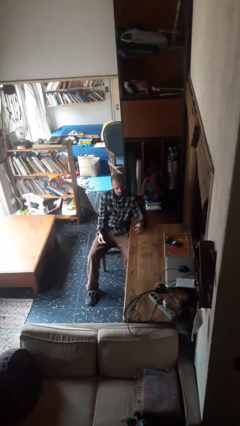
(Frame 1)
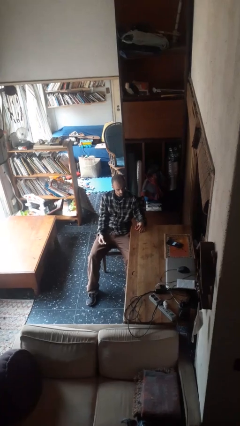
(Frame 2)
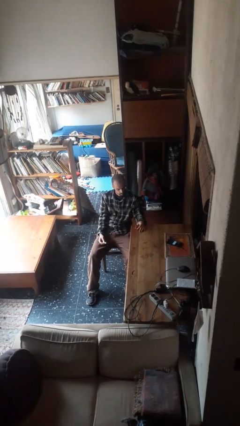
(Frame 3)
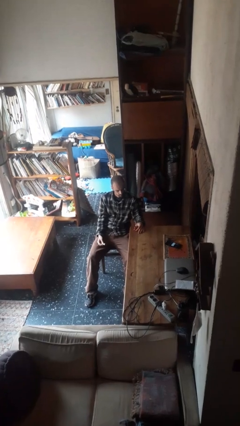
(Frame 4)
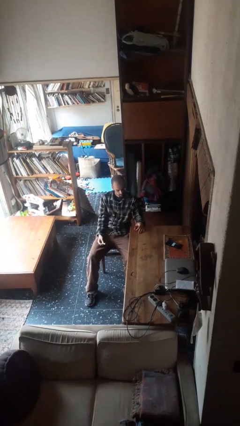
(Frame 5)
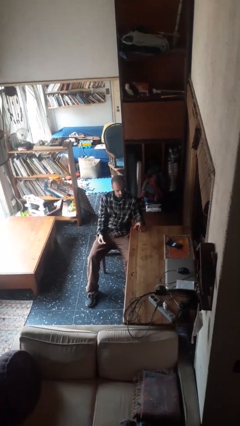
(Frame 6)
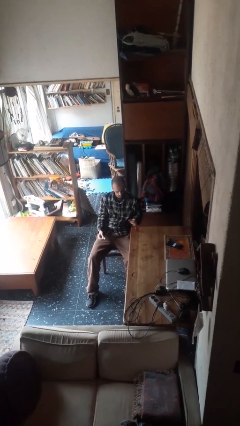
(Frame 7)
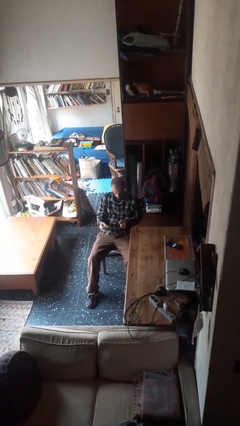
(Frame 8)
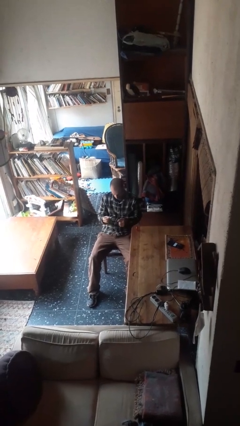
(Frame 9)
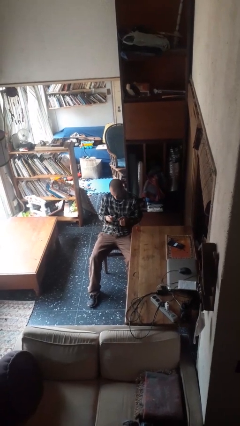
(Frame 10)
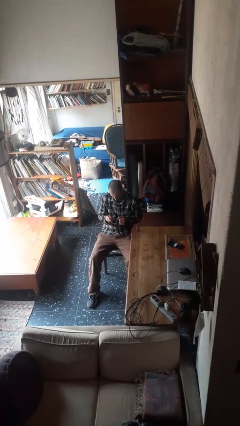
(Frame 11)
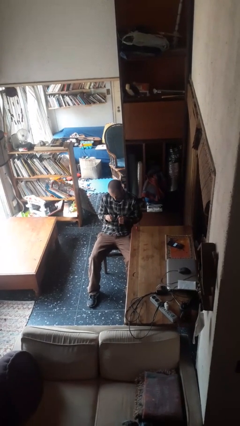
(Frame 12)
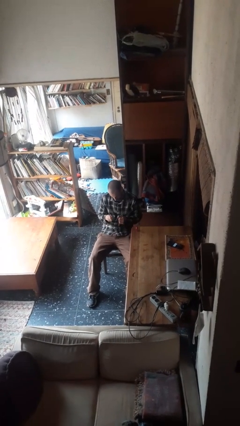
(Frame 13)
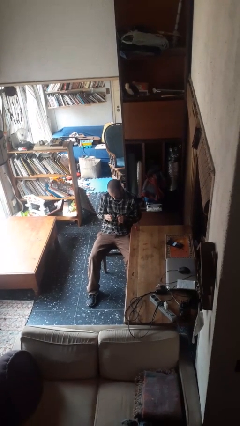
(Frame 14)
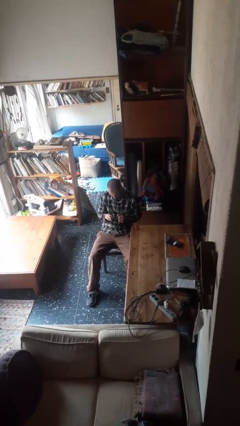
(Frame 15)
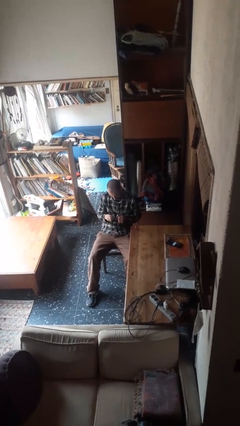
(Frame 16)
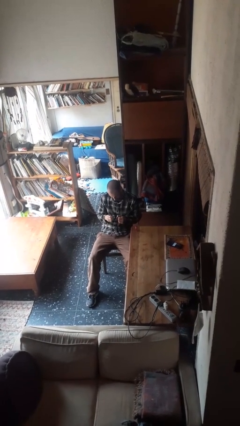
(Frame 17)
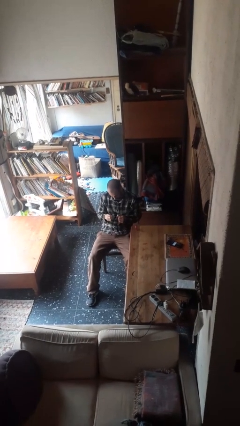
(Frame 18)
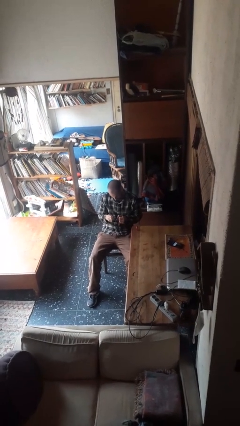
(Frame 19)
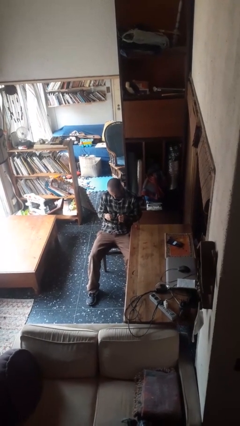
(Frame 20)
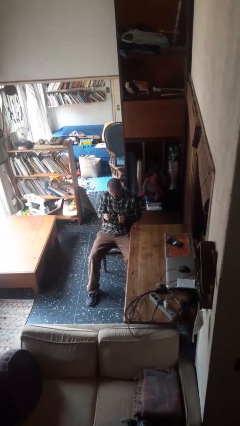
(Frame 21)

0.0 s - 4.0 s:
person paints fingernails

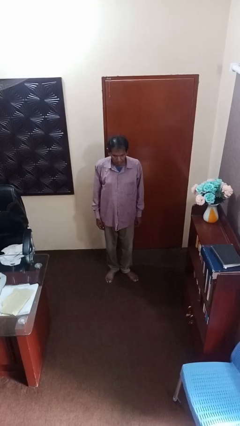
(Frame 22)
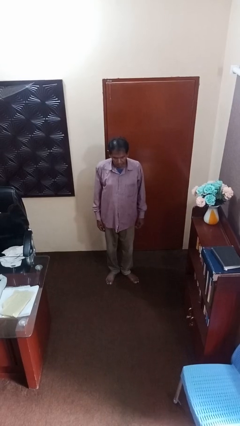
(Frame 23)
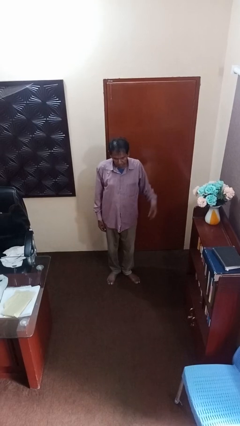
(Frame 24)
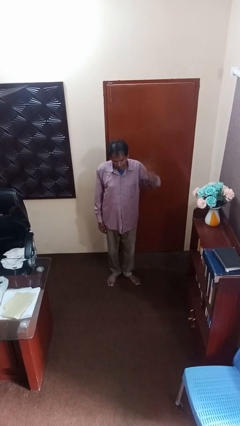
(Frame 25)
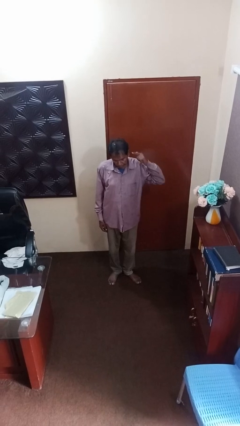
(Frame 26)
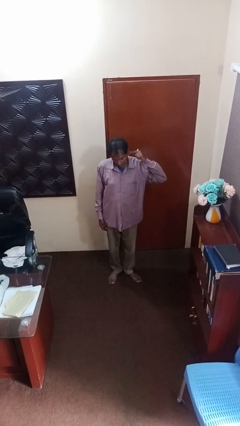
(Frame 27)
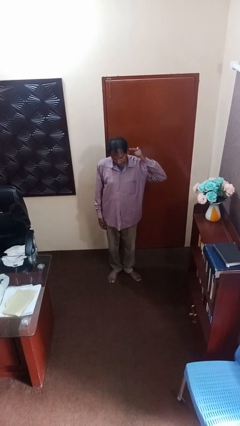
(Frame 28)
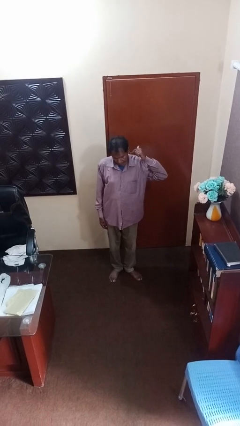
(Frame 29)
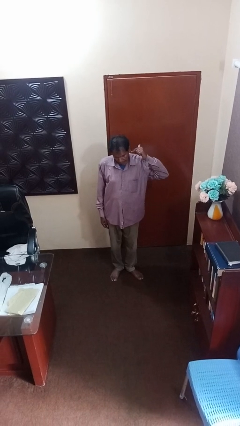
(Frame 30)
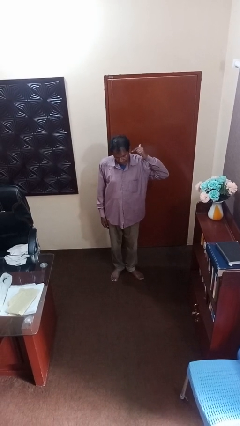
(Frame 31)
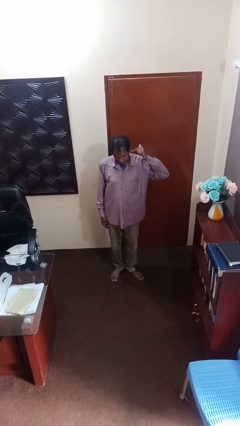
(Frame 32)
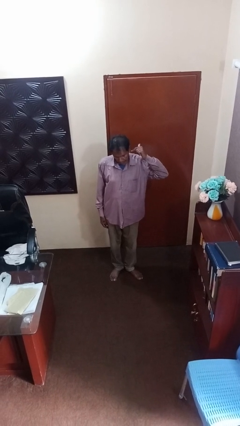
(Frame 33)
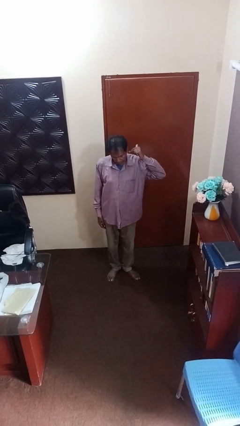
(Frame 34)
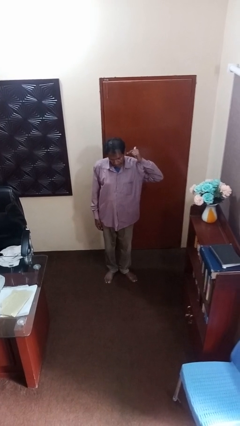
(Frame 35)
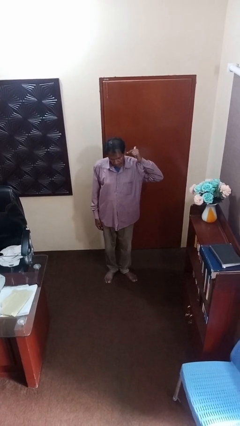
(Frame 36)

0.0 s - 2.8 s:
person gestures be quiet

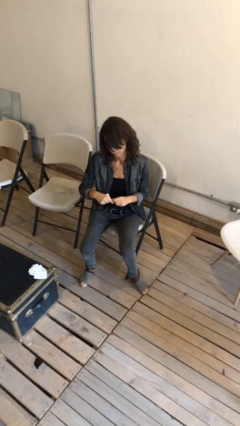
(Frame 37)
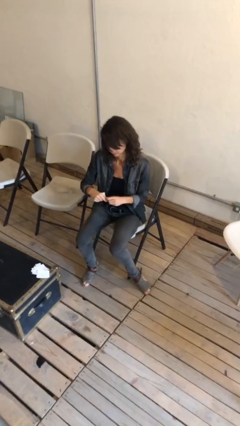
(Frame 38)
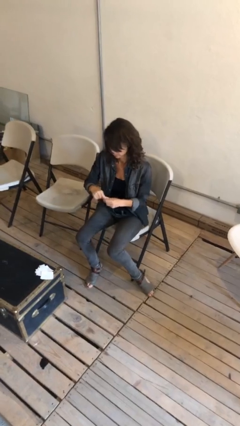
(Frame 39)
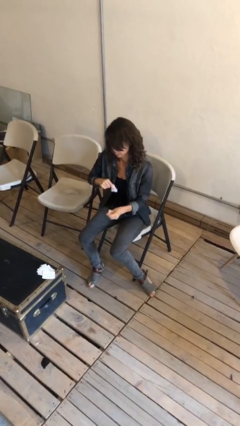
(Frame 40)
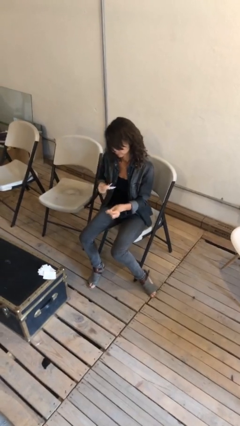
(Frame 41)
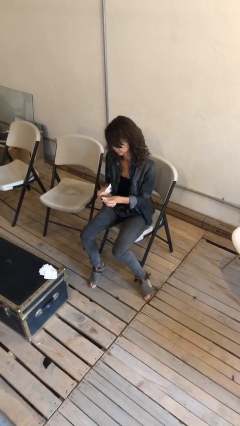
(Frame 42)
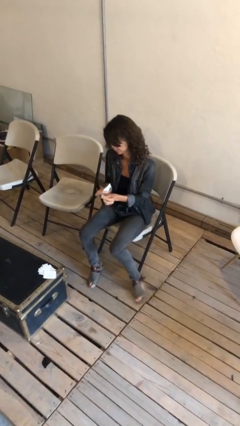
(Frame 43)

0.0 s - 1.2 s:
person tears paper

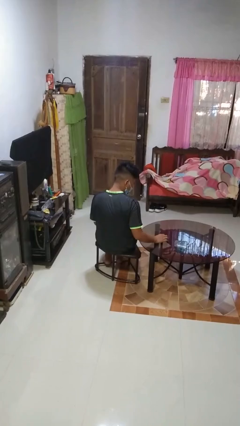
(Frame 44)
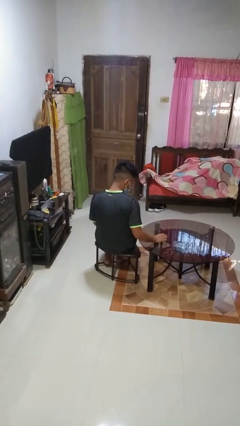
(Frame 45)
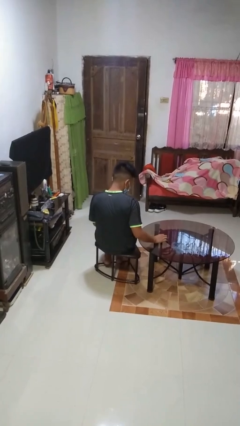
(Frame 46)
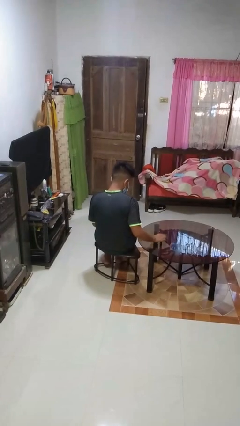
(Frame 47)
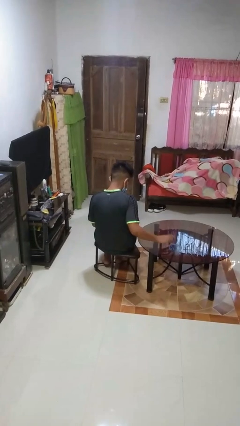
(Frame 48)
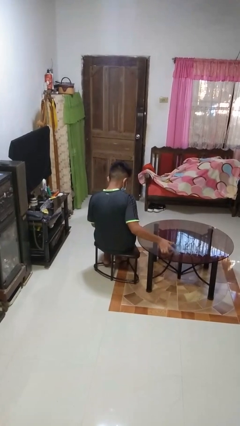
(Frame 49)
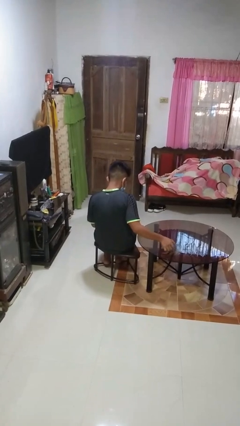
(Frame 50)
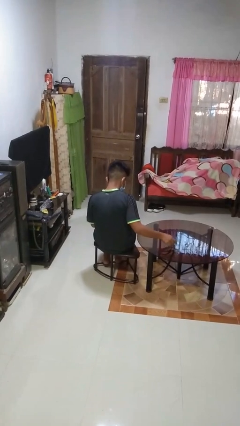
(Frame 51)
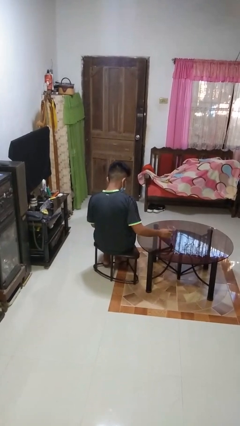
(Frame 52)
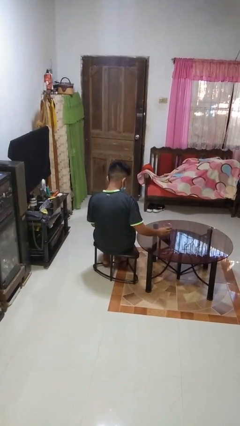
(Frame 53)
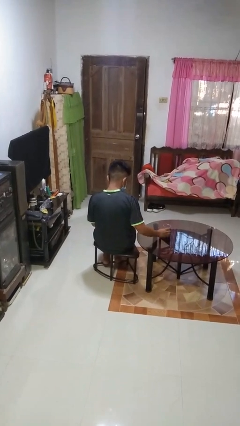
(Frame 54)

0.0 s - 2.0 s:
person drinks from beverage can

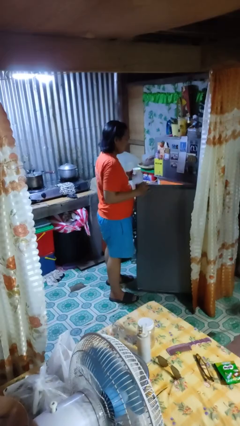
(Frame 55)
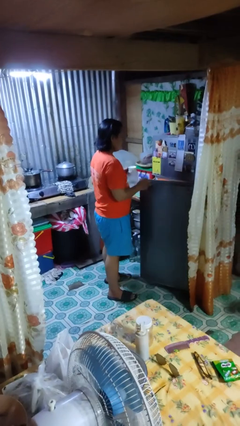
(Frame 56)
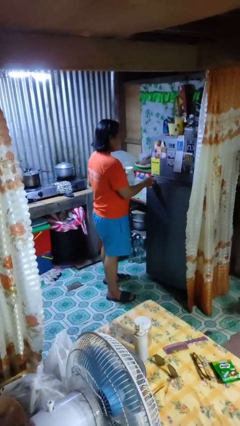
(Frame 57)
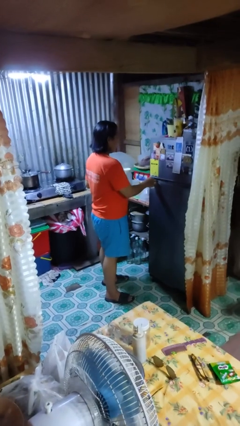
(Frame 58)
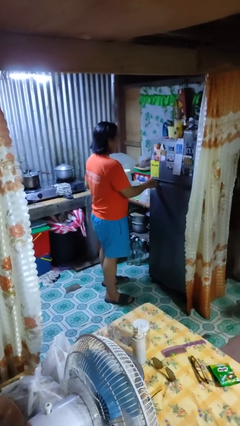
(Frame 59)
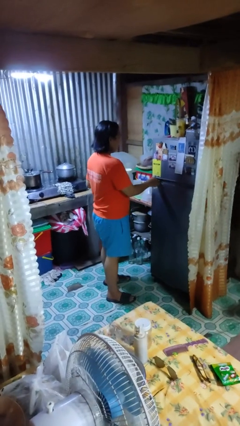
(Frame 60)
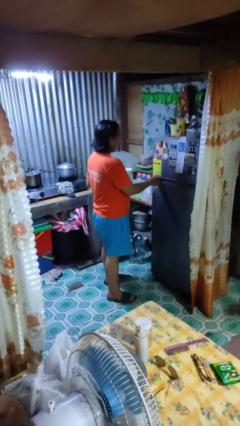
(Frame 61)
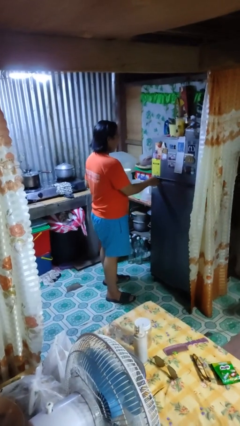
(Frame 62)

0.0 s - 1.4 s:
person closes refrigerator

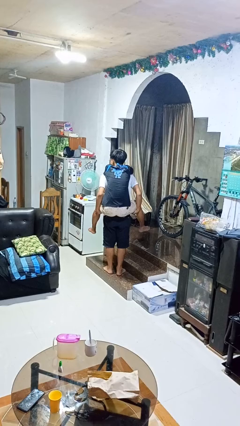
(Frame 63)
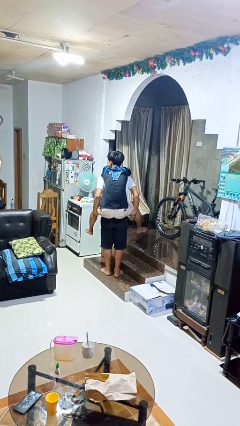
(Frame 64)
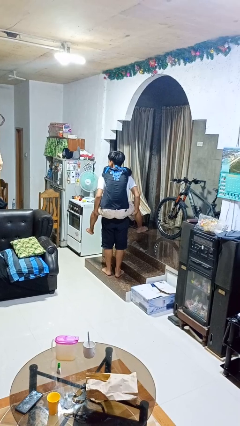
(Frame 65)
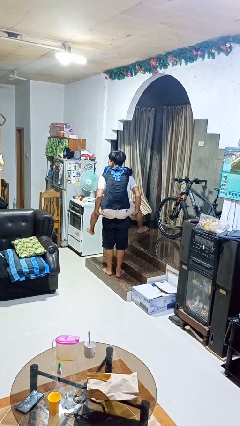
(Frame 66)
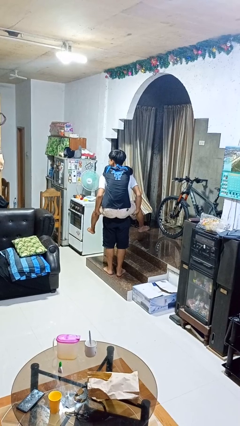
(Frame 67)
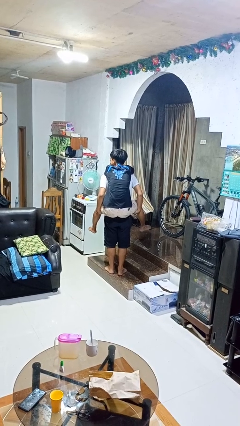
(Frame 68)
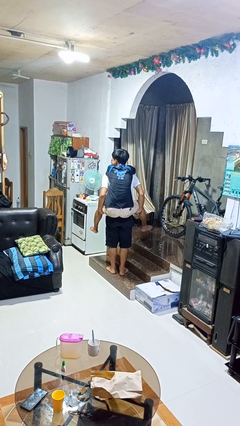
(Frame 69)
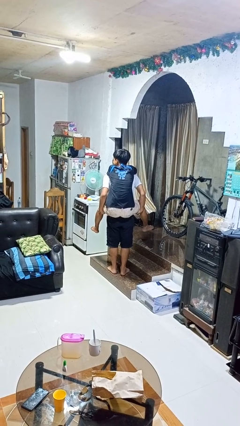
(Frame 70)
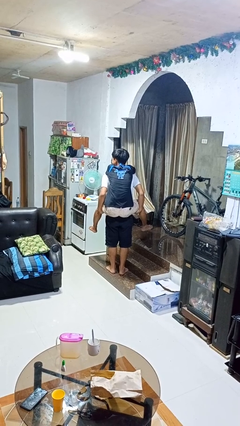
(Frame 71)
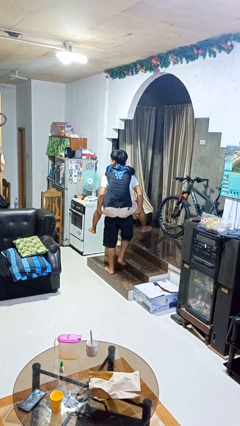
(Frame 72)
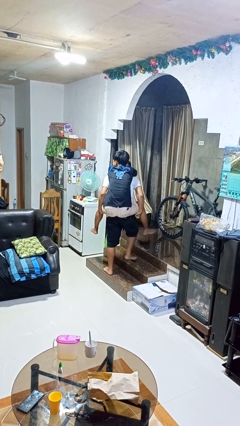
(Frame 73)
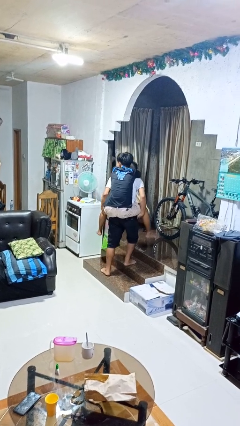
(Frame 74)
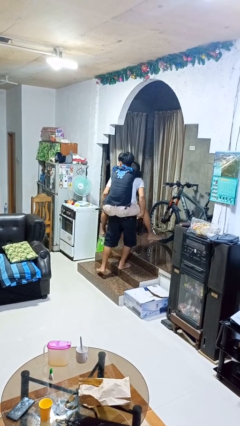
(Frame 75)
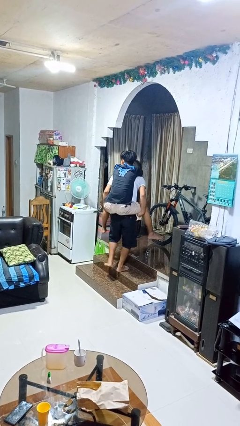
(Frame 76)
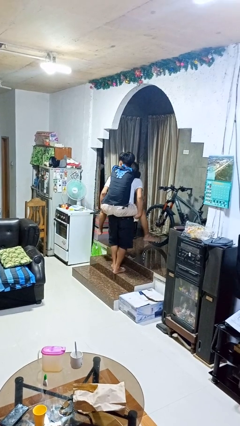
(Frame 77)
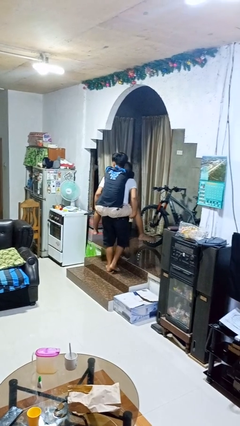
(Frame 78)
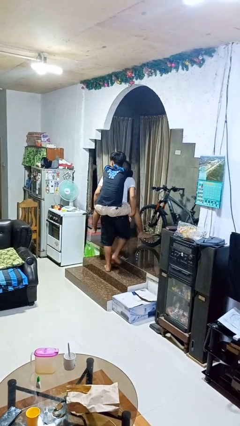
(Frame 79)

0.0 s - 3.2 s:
person carries person on back

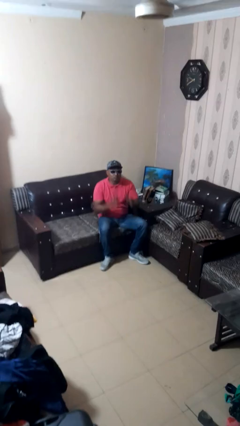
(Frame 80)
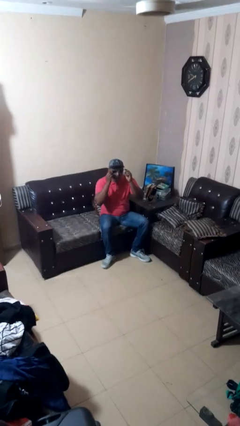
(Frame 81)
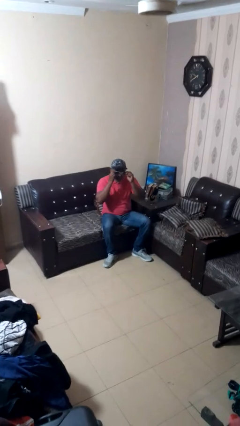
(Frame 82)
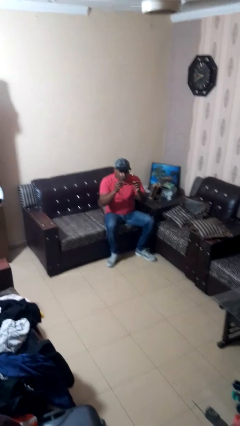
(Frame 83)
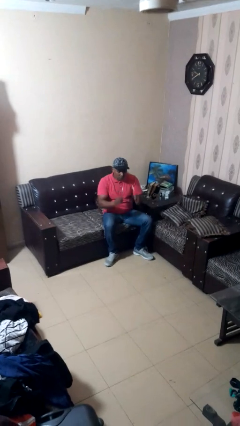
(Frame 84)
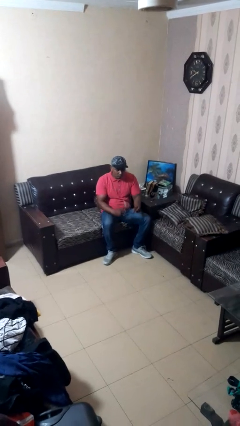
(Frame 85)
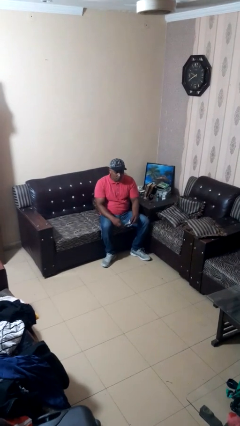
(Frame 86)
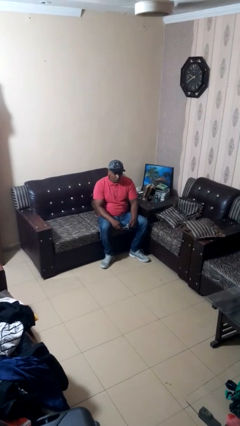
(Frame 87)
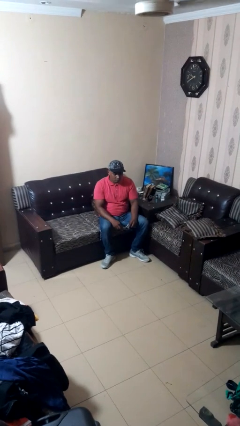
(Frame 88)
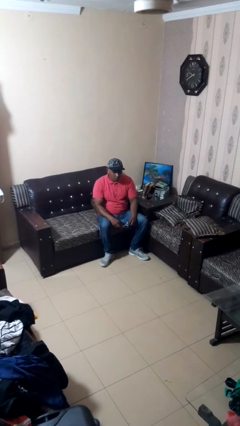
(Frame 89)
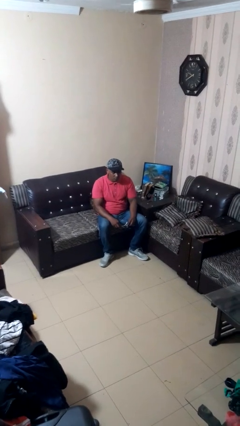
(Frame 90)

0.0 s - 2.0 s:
person takes off sunglasses

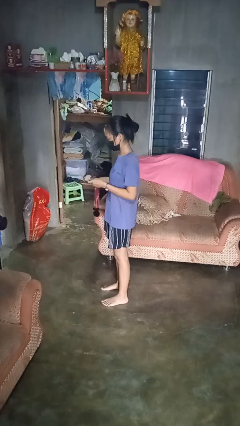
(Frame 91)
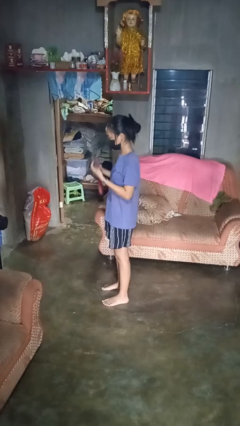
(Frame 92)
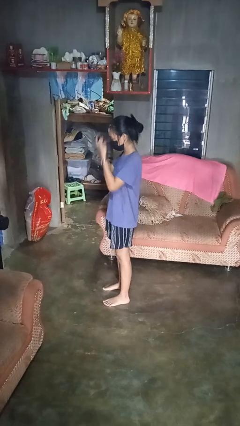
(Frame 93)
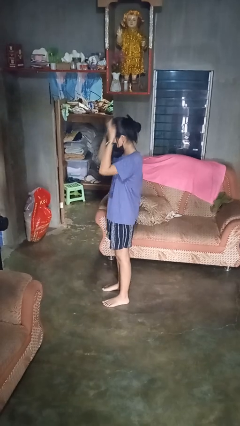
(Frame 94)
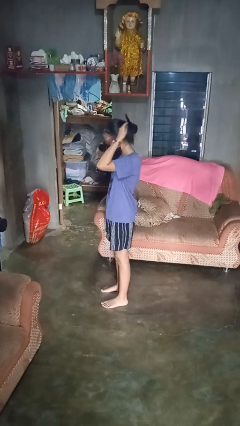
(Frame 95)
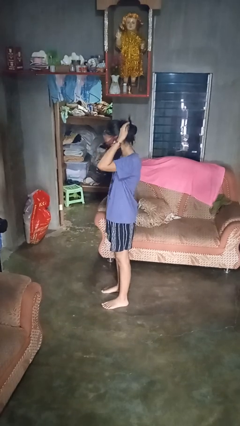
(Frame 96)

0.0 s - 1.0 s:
person puts on necklace
